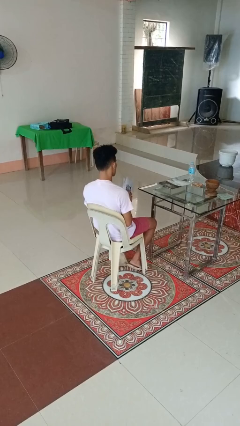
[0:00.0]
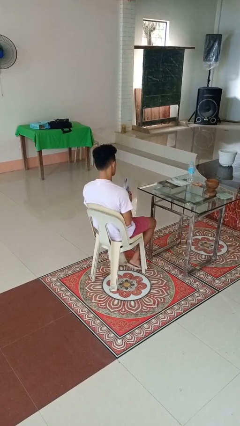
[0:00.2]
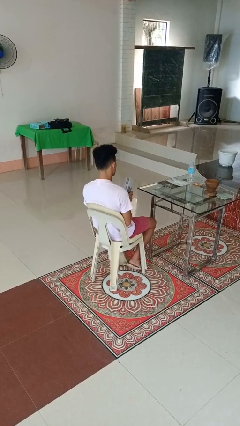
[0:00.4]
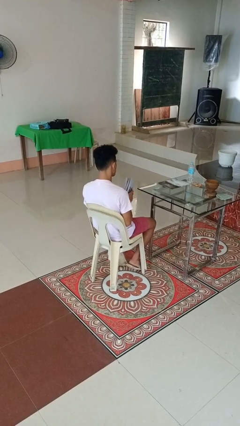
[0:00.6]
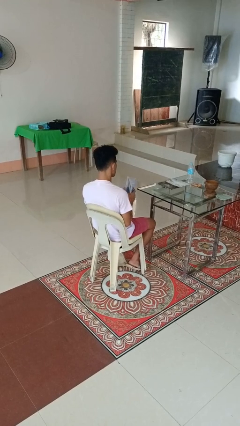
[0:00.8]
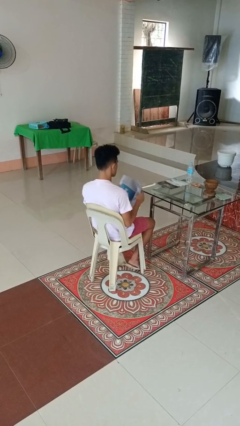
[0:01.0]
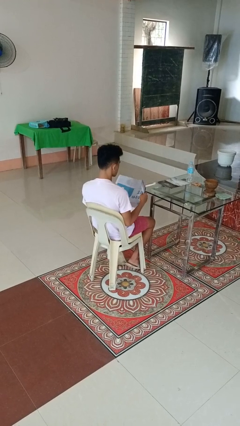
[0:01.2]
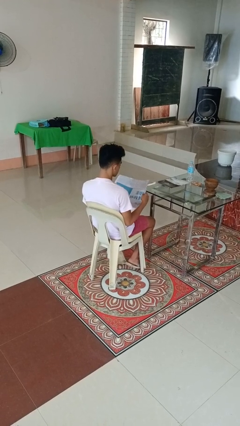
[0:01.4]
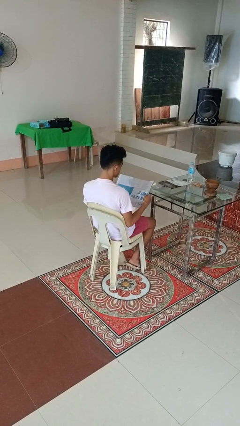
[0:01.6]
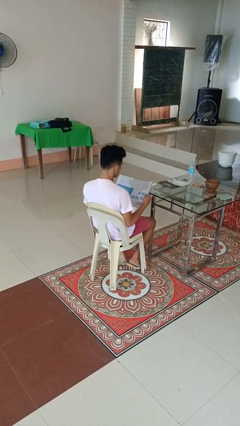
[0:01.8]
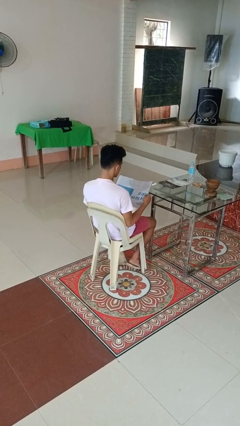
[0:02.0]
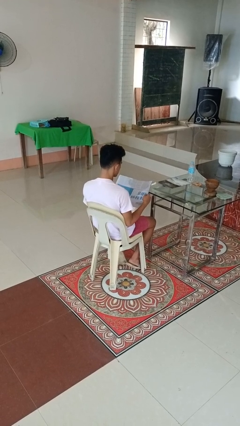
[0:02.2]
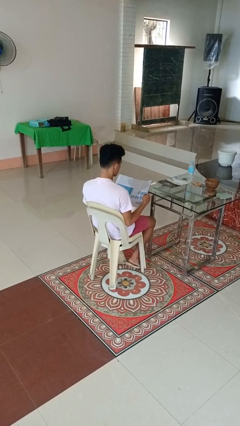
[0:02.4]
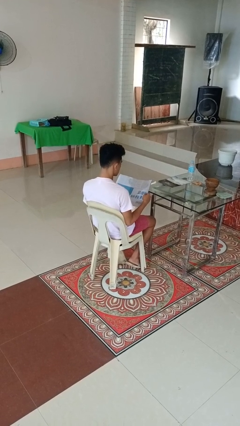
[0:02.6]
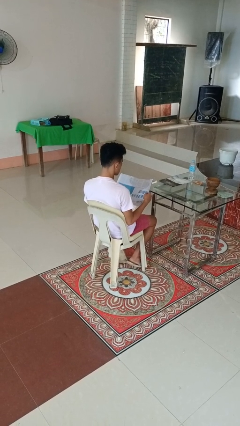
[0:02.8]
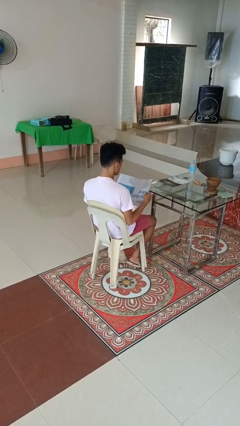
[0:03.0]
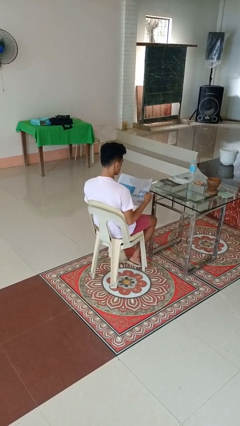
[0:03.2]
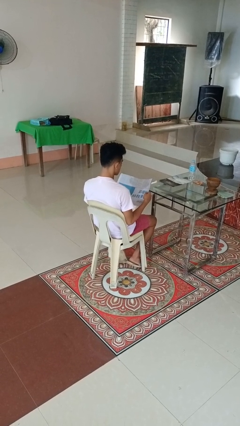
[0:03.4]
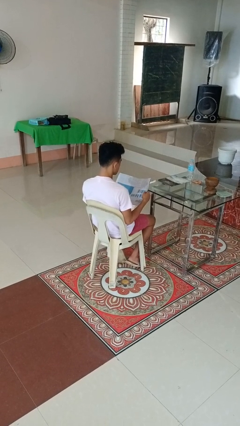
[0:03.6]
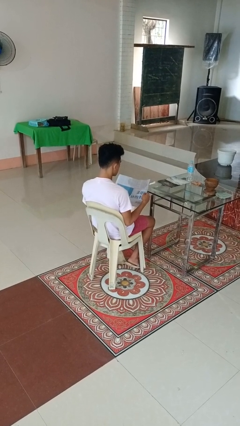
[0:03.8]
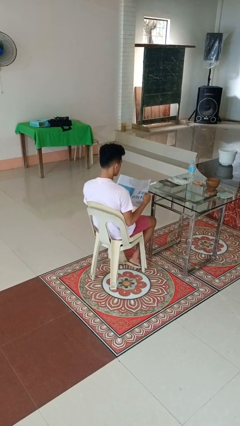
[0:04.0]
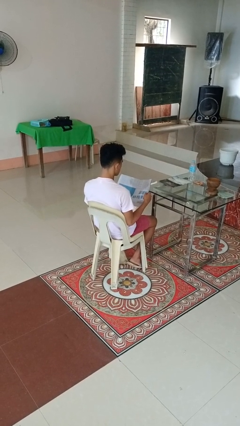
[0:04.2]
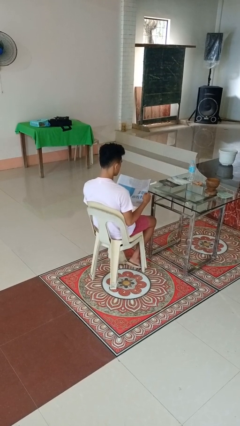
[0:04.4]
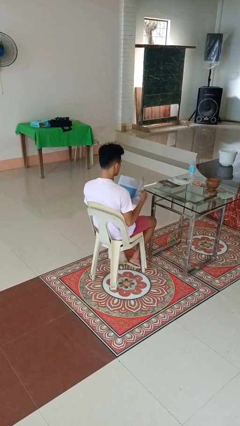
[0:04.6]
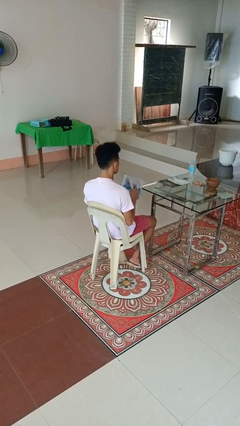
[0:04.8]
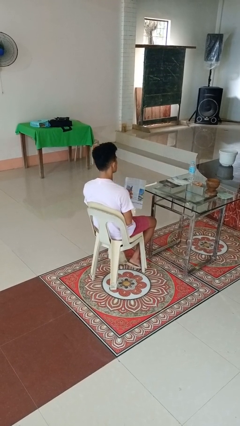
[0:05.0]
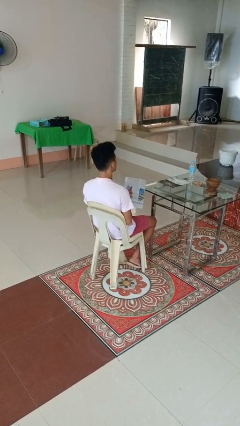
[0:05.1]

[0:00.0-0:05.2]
person reads newspaper

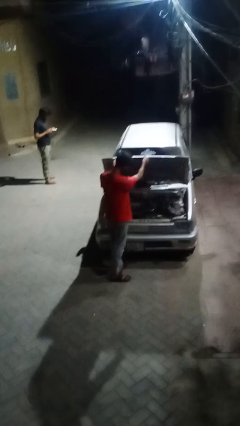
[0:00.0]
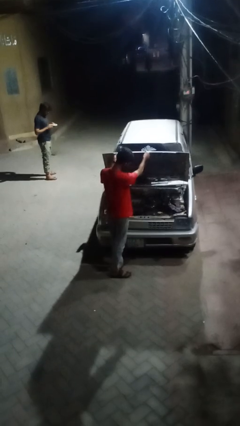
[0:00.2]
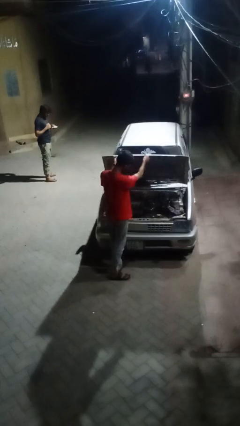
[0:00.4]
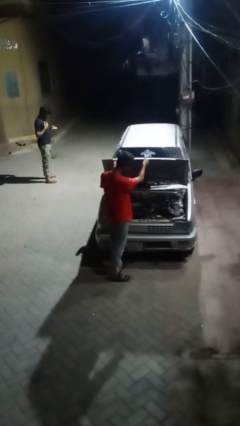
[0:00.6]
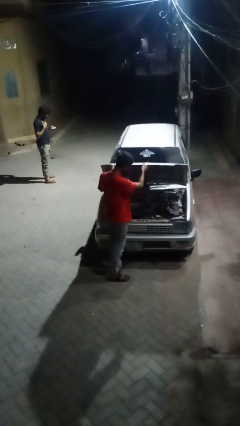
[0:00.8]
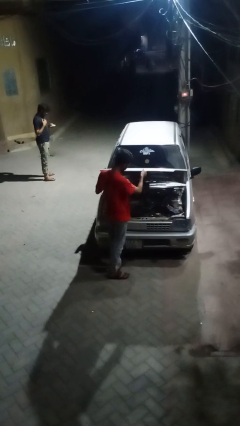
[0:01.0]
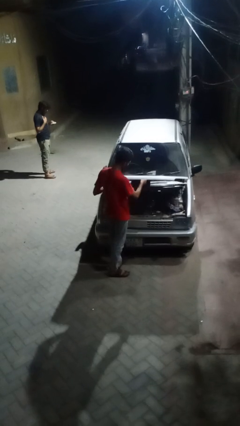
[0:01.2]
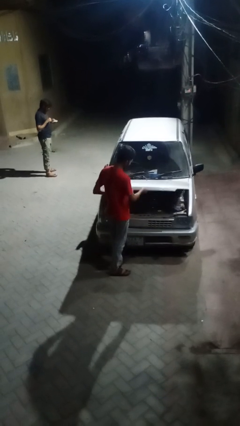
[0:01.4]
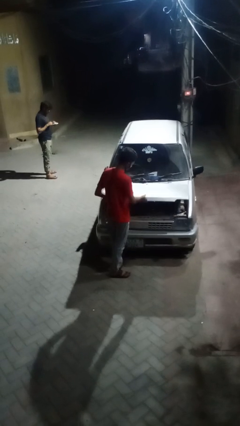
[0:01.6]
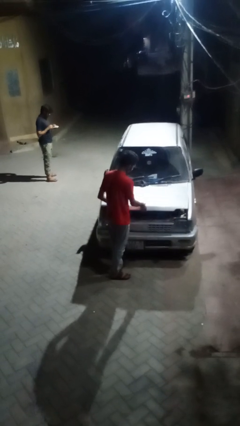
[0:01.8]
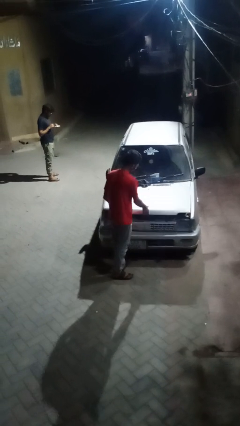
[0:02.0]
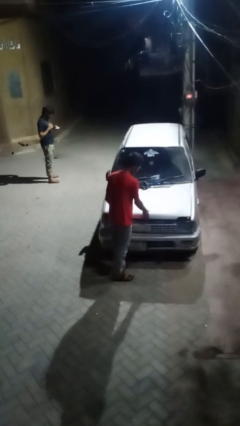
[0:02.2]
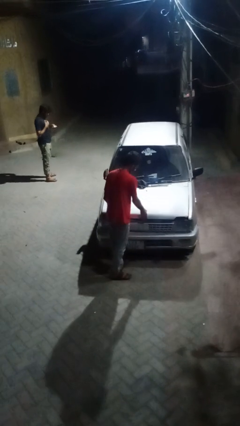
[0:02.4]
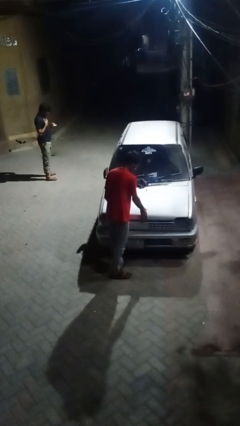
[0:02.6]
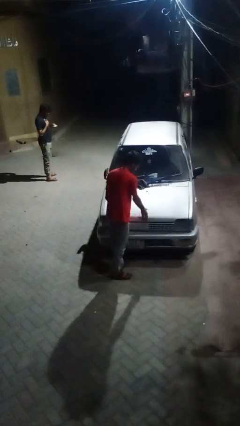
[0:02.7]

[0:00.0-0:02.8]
person closes car hood

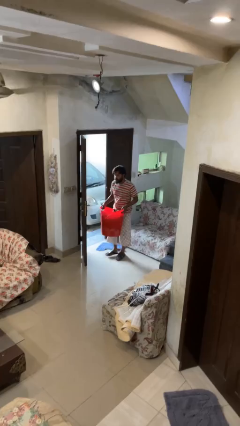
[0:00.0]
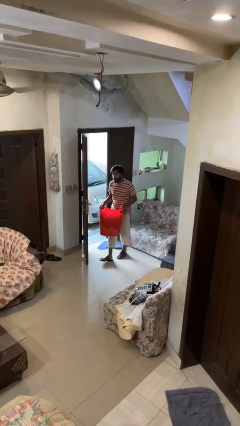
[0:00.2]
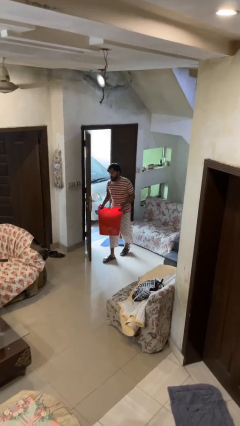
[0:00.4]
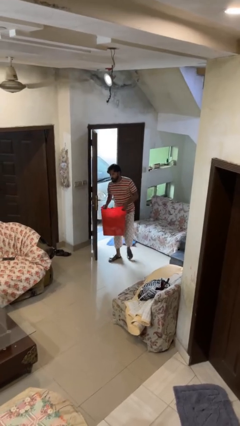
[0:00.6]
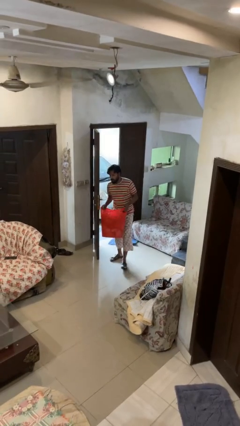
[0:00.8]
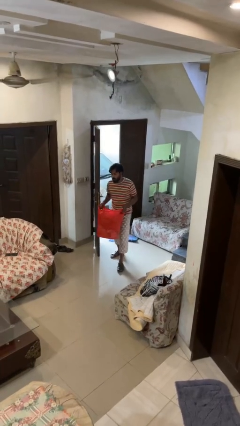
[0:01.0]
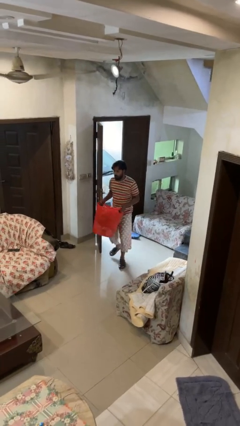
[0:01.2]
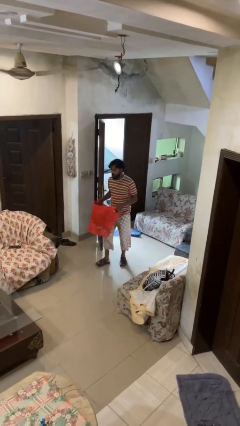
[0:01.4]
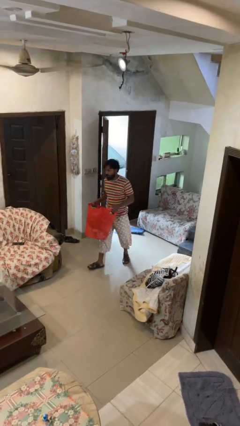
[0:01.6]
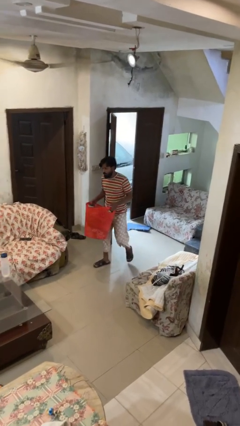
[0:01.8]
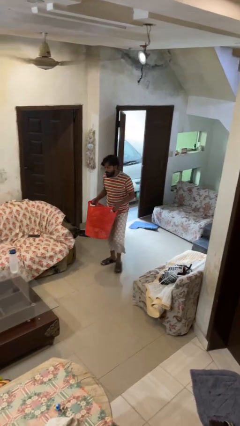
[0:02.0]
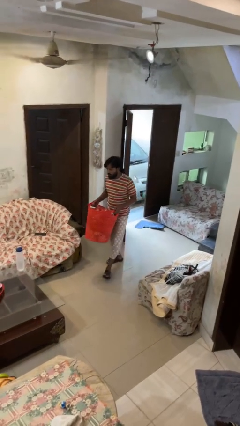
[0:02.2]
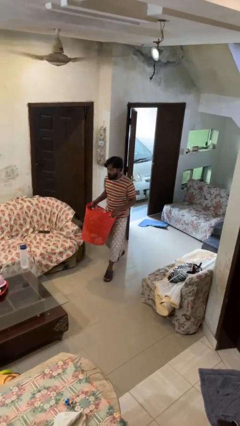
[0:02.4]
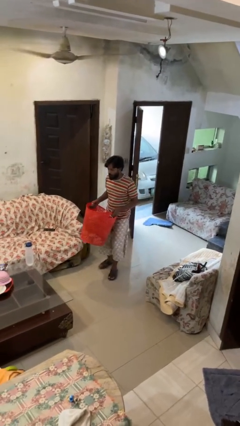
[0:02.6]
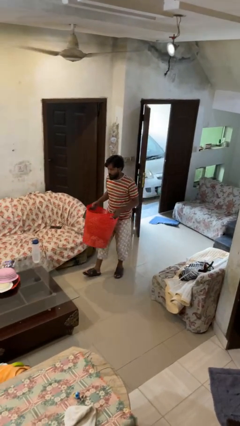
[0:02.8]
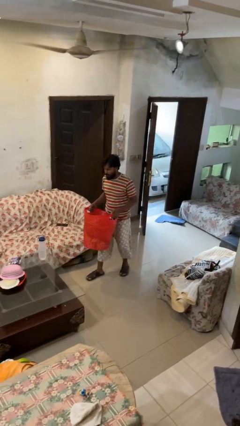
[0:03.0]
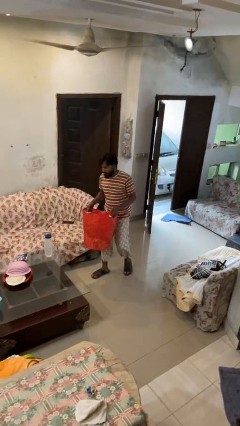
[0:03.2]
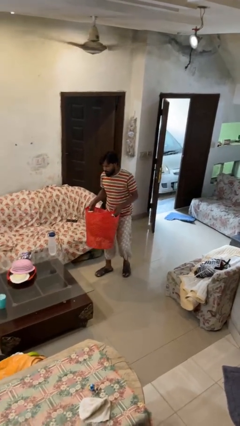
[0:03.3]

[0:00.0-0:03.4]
person carries laundry basket

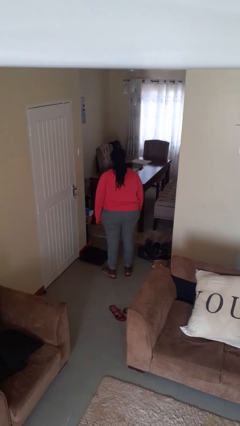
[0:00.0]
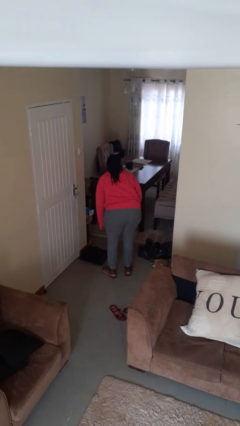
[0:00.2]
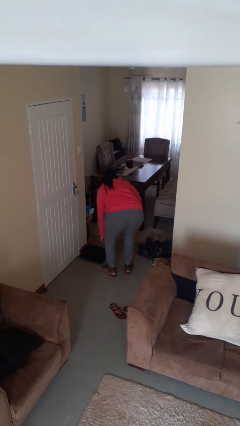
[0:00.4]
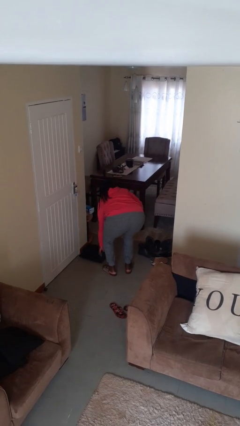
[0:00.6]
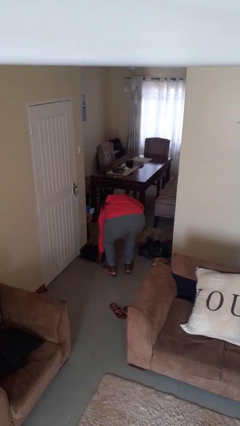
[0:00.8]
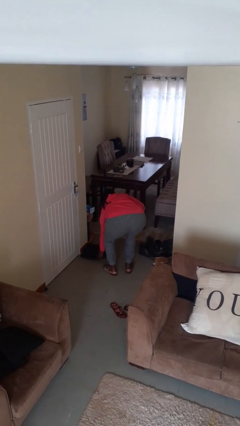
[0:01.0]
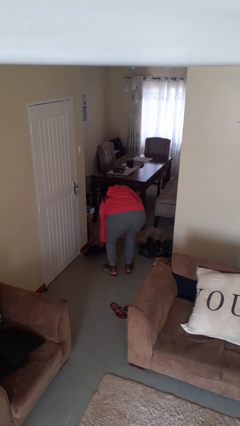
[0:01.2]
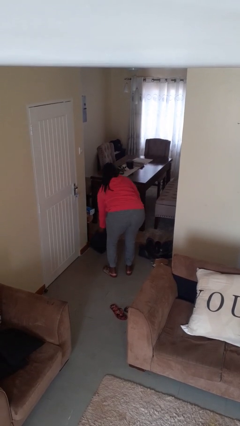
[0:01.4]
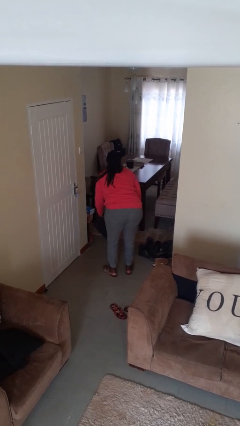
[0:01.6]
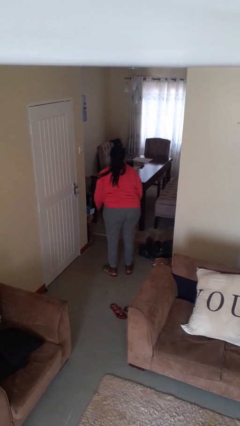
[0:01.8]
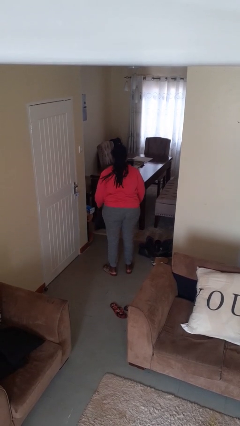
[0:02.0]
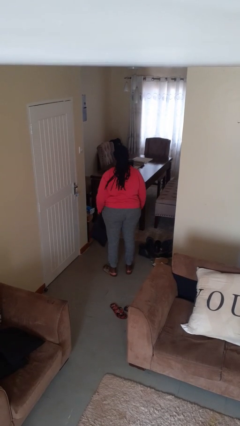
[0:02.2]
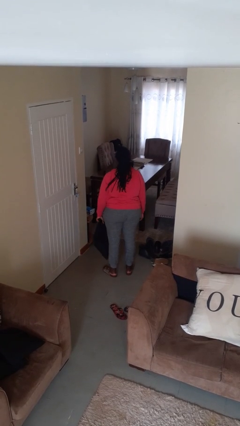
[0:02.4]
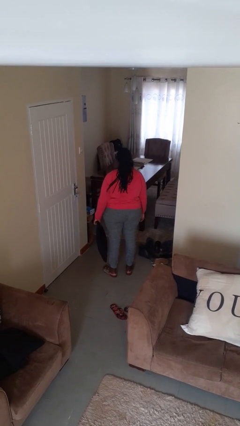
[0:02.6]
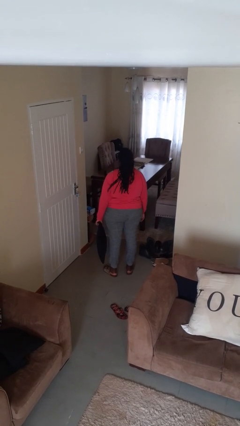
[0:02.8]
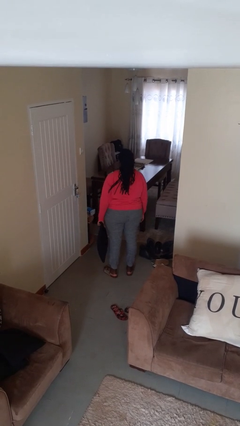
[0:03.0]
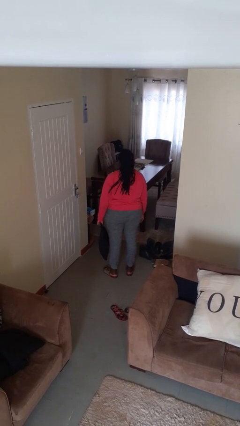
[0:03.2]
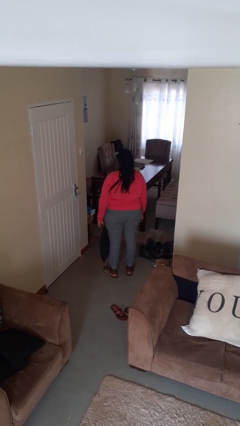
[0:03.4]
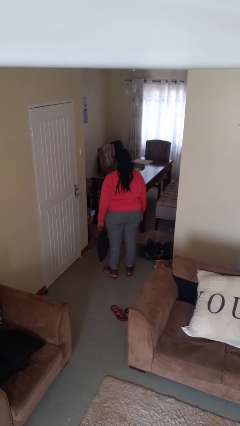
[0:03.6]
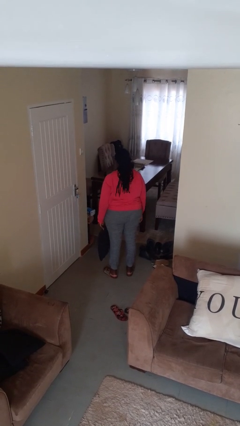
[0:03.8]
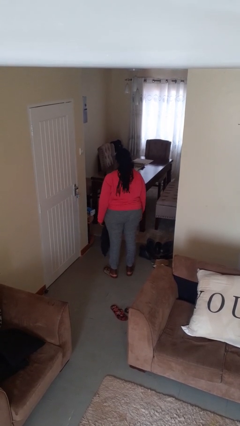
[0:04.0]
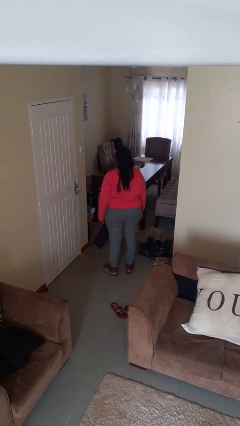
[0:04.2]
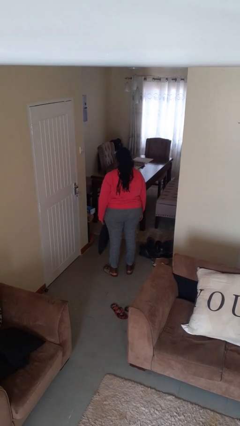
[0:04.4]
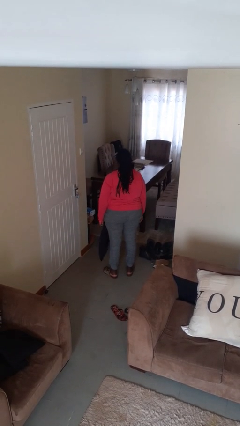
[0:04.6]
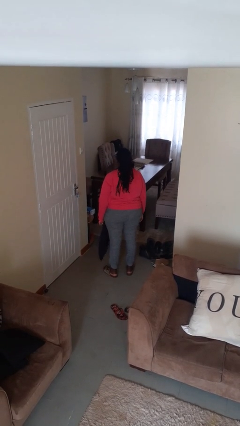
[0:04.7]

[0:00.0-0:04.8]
person picks up object from floor

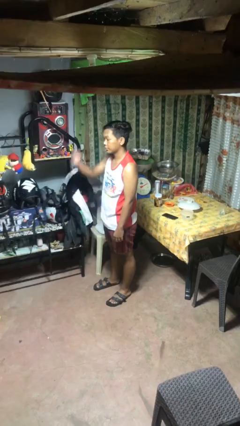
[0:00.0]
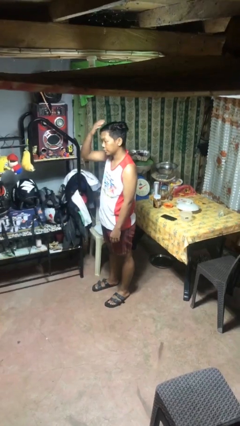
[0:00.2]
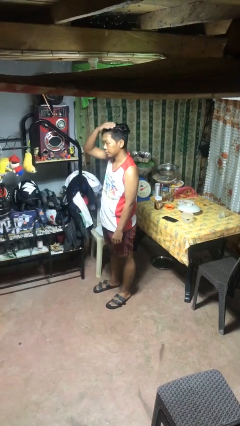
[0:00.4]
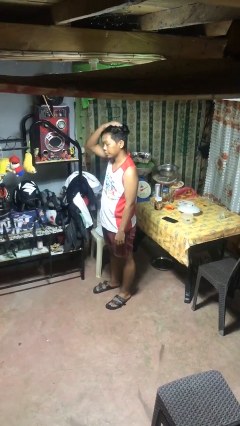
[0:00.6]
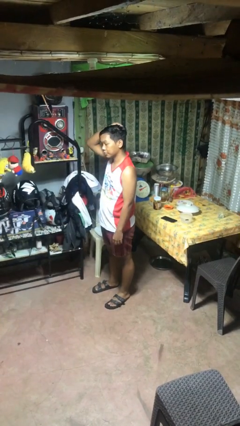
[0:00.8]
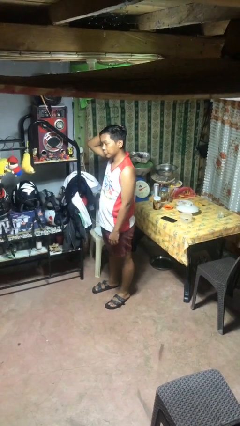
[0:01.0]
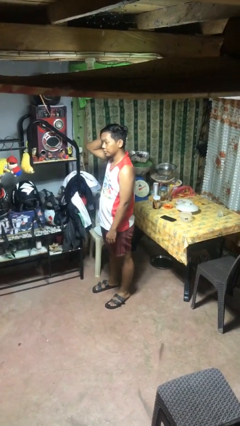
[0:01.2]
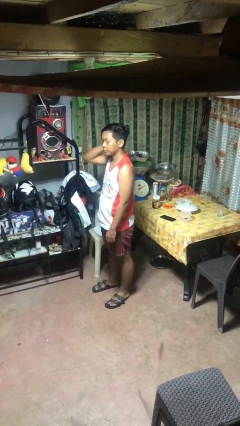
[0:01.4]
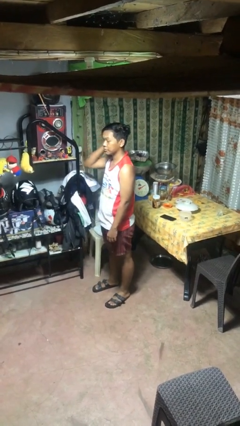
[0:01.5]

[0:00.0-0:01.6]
person pats head
